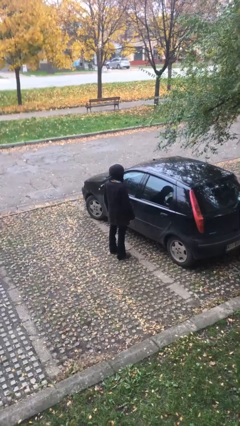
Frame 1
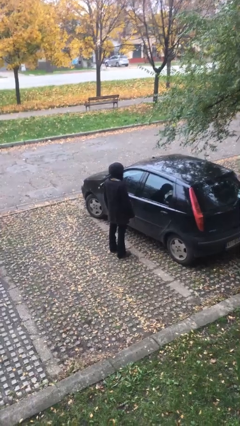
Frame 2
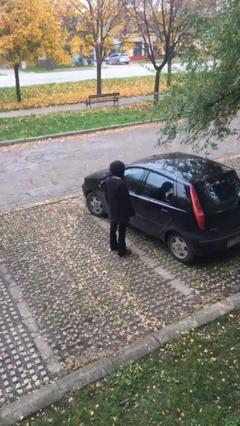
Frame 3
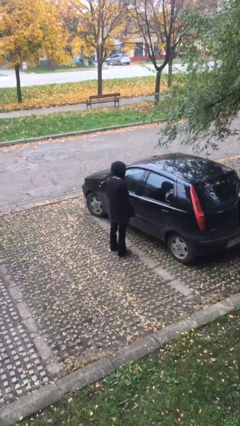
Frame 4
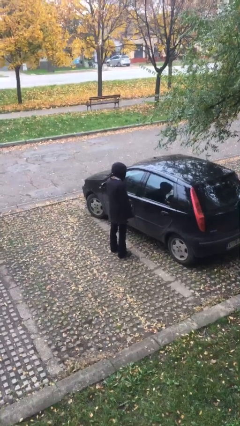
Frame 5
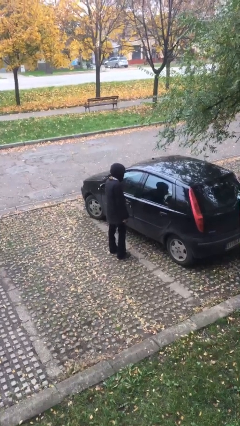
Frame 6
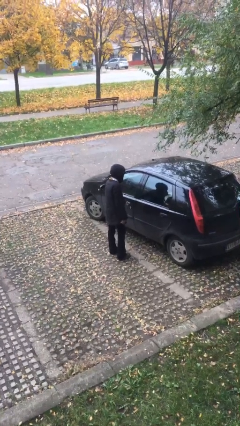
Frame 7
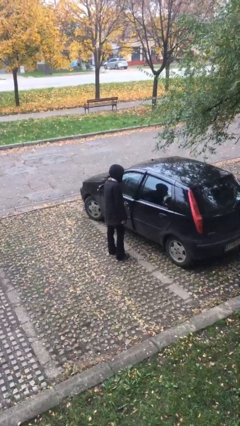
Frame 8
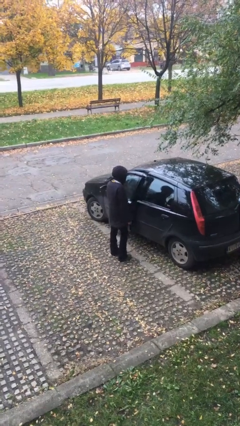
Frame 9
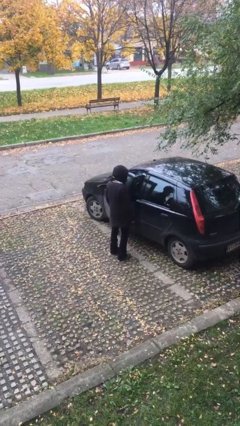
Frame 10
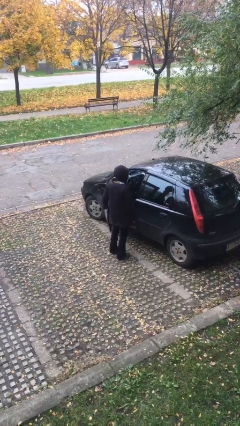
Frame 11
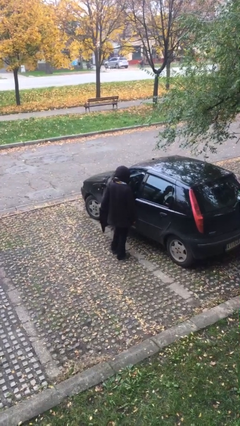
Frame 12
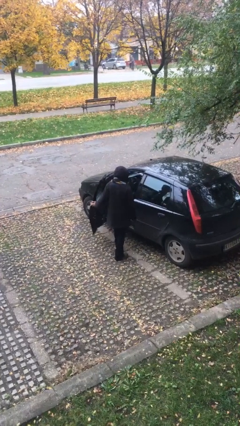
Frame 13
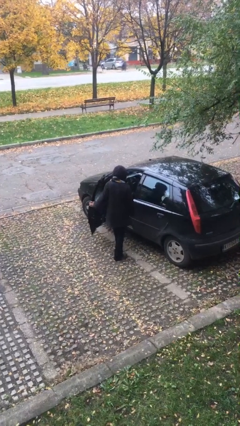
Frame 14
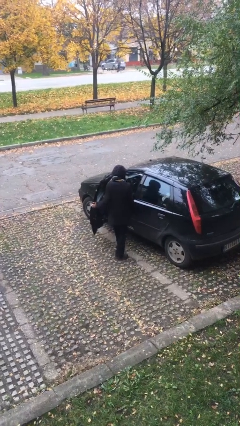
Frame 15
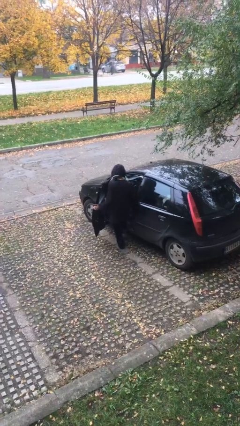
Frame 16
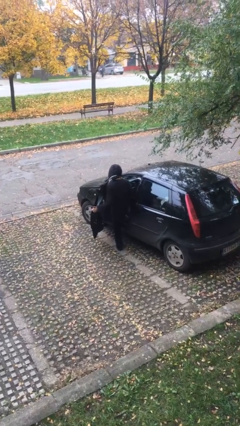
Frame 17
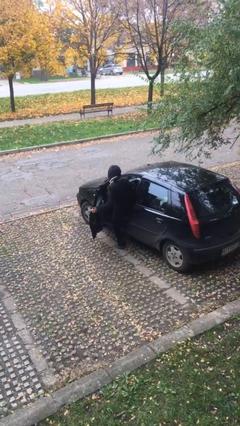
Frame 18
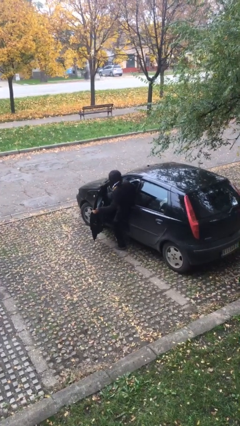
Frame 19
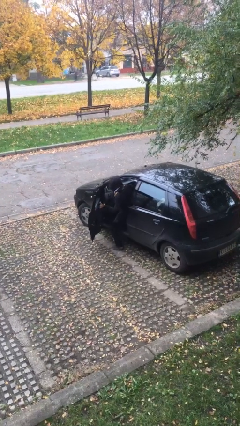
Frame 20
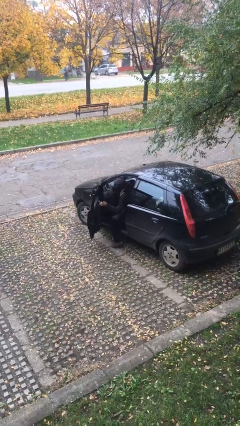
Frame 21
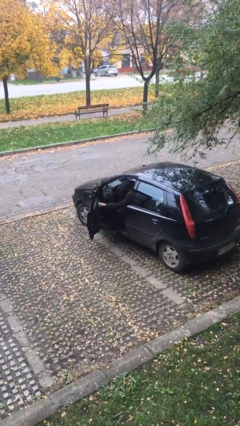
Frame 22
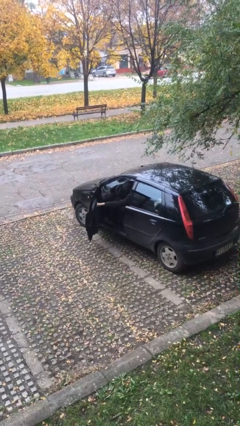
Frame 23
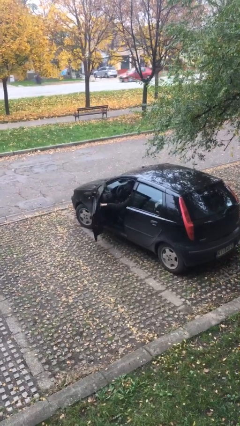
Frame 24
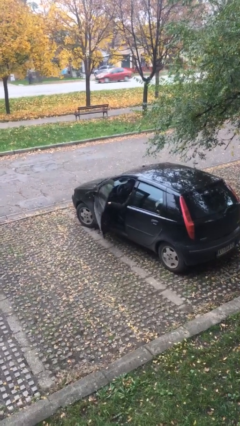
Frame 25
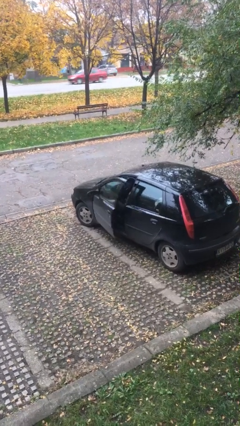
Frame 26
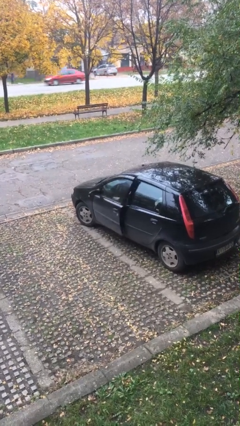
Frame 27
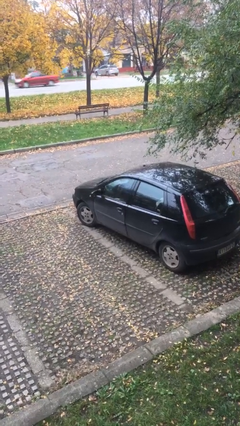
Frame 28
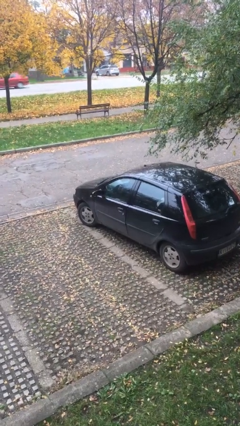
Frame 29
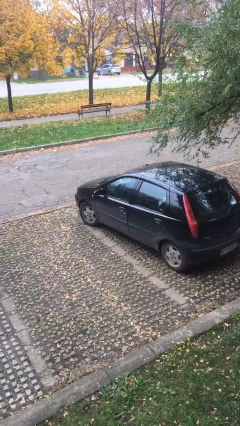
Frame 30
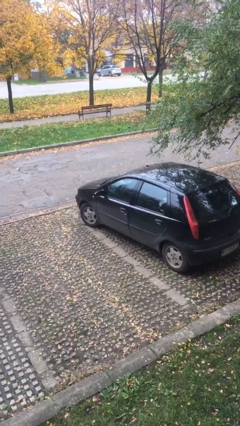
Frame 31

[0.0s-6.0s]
person enters car

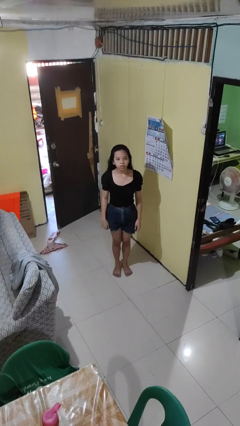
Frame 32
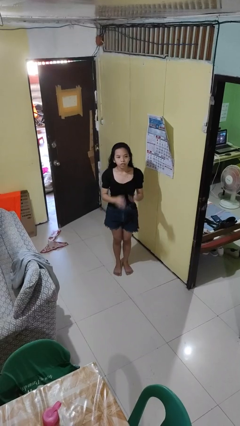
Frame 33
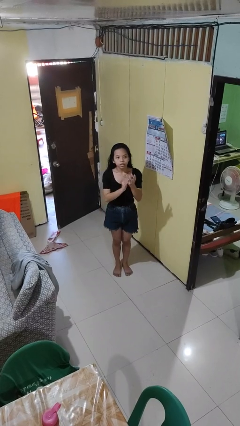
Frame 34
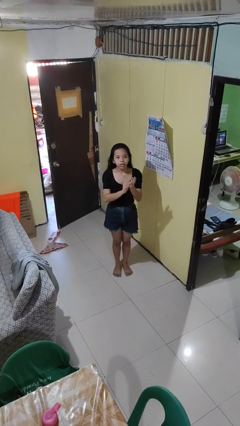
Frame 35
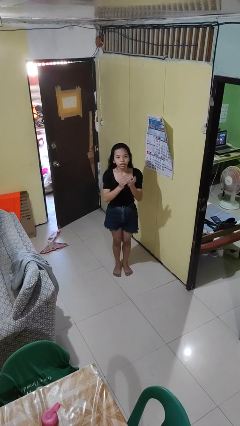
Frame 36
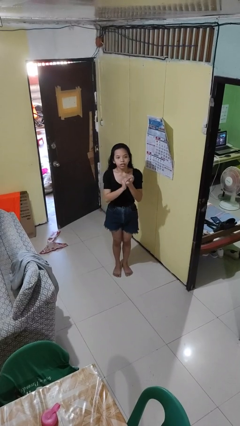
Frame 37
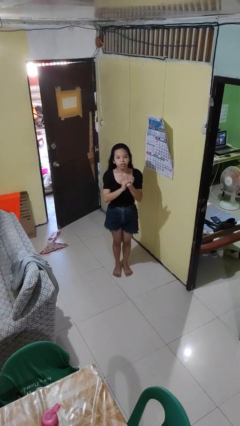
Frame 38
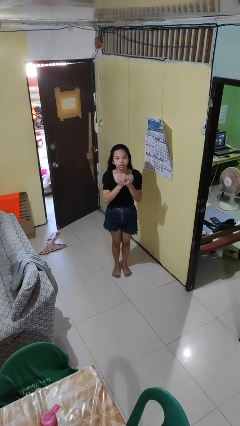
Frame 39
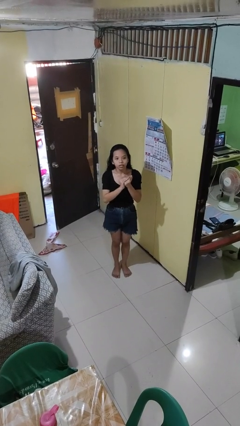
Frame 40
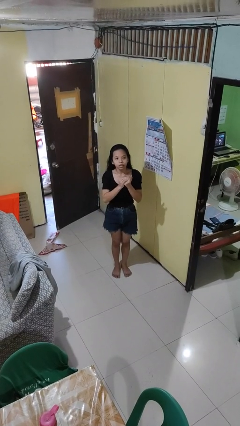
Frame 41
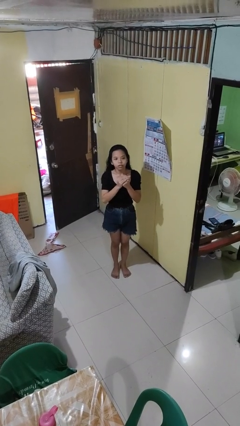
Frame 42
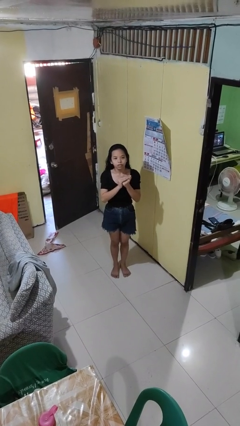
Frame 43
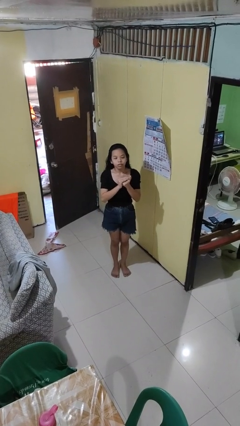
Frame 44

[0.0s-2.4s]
person cracks knuckles

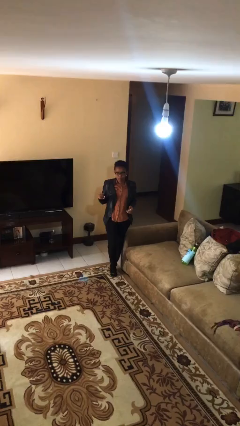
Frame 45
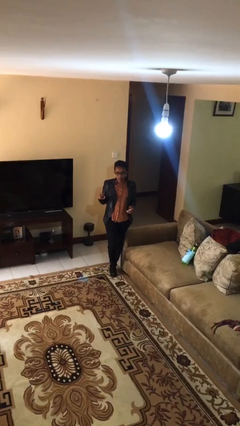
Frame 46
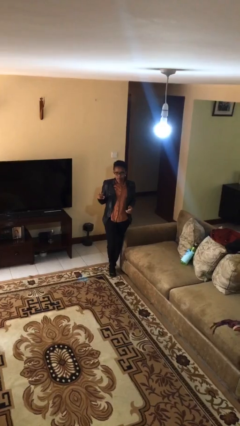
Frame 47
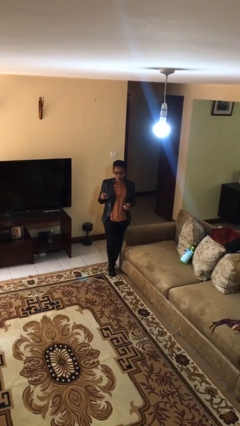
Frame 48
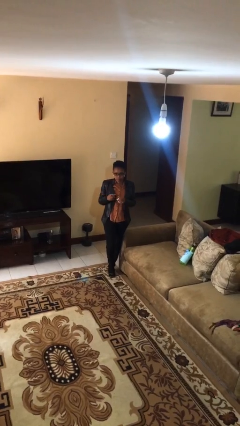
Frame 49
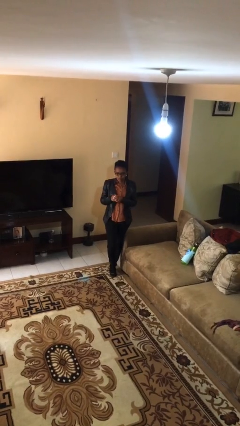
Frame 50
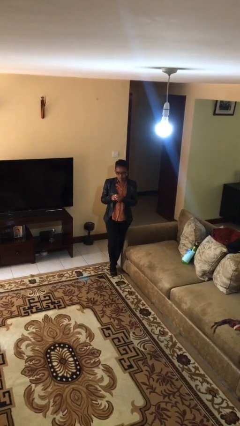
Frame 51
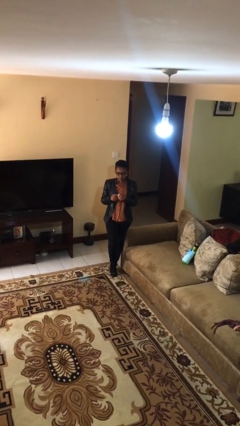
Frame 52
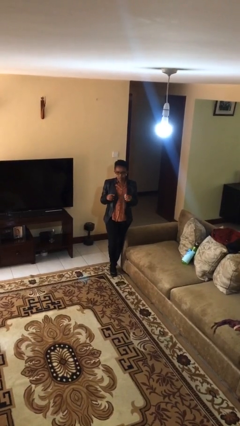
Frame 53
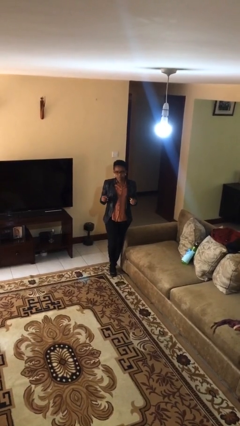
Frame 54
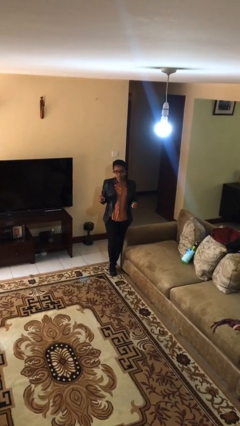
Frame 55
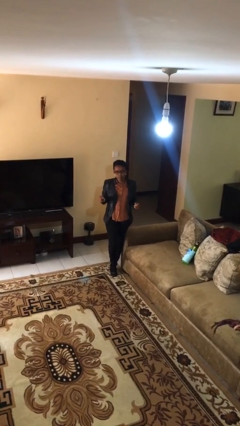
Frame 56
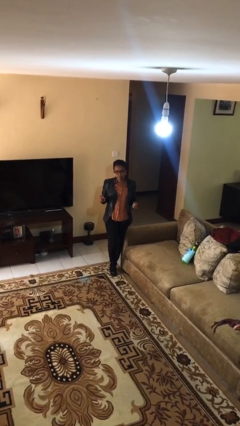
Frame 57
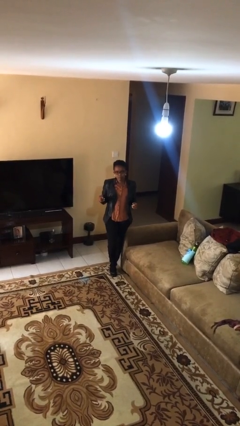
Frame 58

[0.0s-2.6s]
person takes off ring

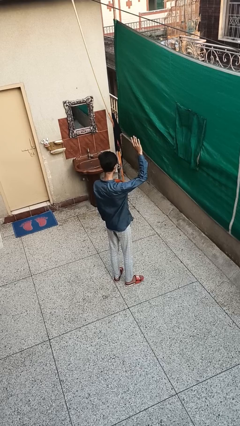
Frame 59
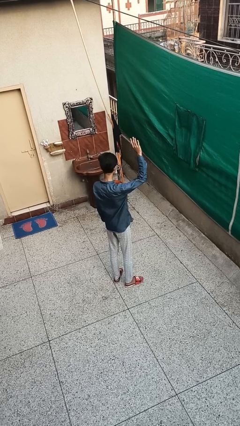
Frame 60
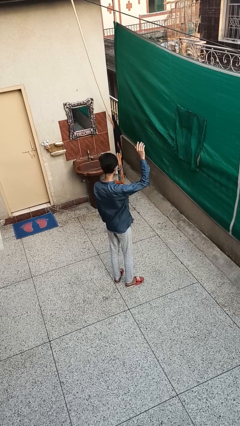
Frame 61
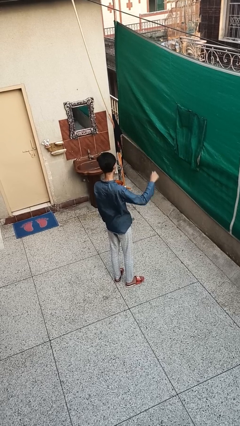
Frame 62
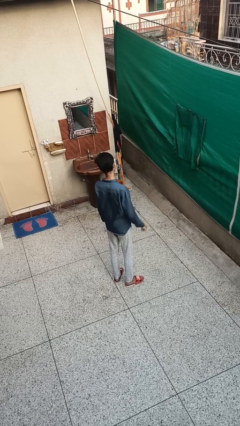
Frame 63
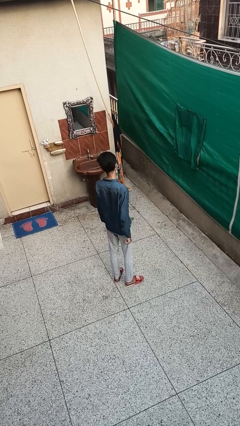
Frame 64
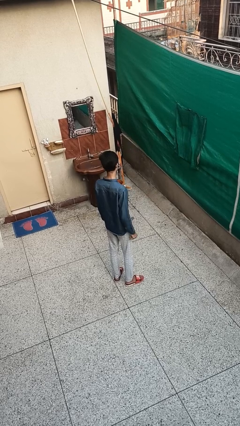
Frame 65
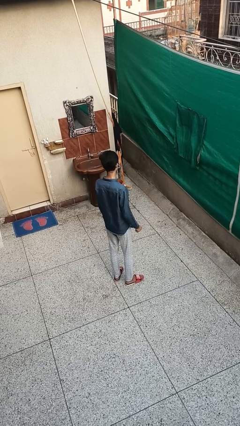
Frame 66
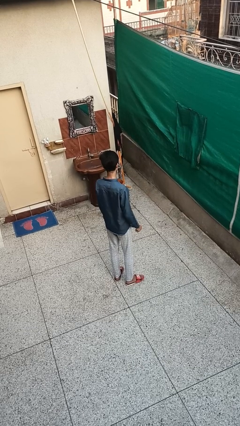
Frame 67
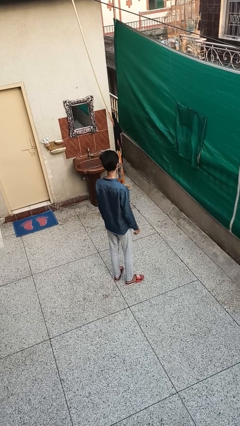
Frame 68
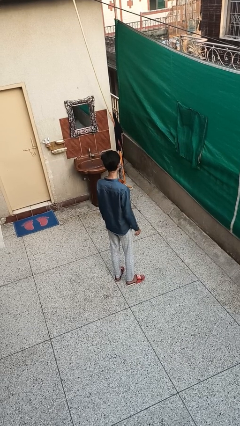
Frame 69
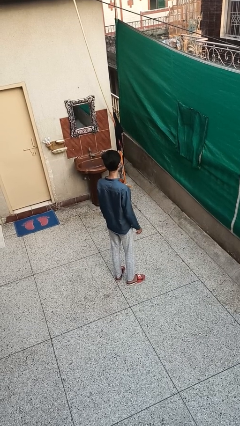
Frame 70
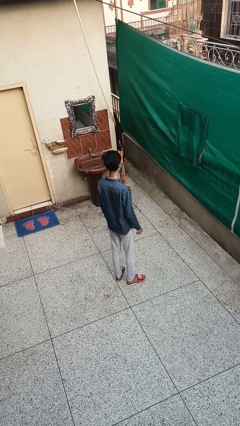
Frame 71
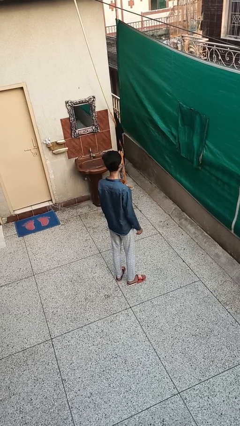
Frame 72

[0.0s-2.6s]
person gestures lower hand

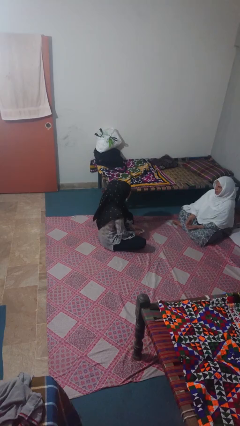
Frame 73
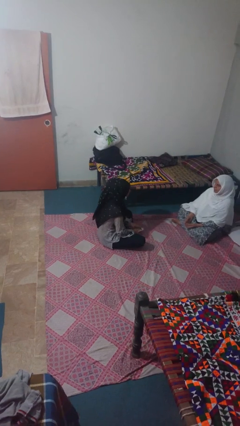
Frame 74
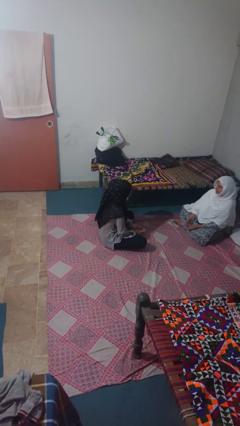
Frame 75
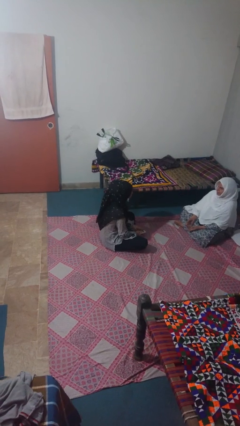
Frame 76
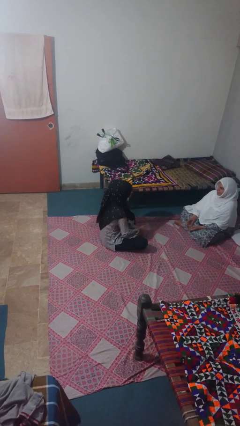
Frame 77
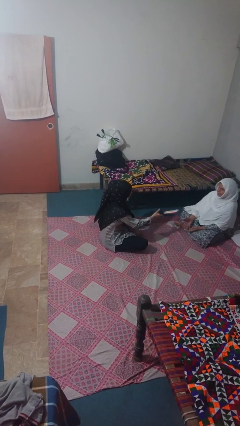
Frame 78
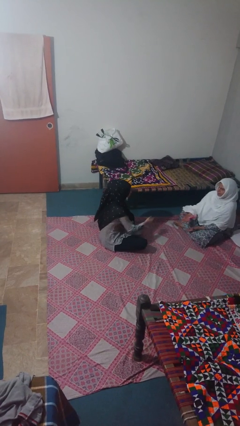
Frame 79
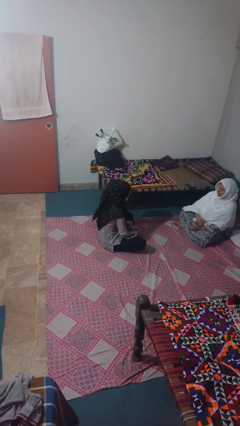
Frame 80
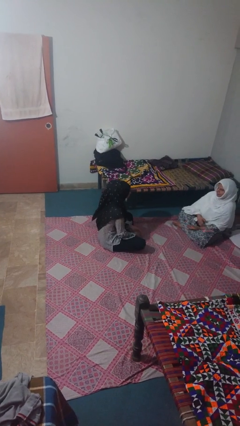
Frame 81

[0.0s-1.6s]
person throws object to person

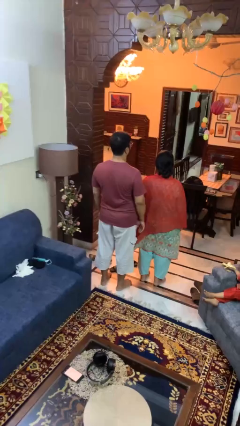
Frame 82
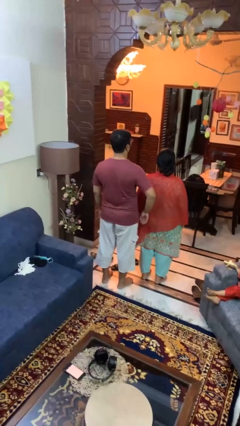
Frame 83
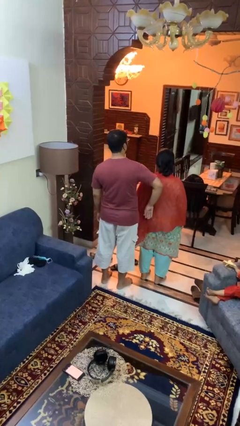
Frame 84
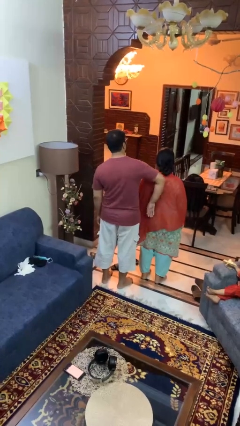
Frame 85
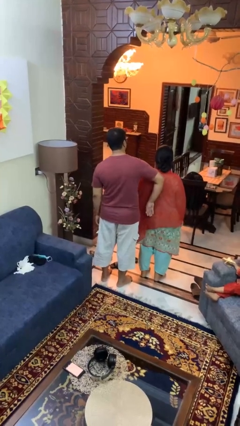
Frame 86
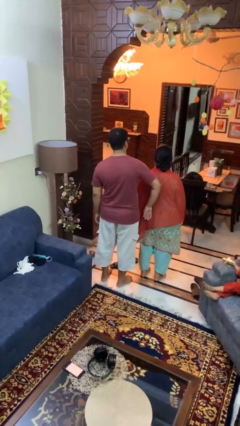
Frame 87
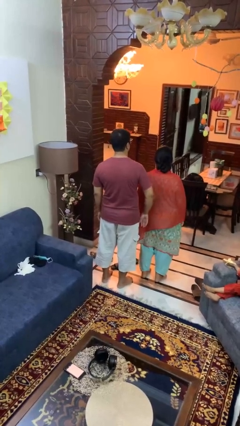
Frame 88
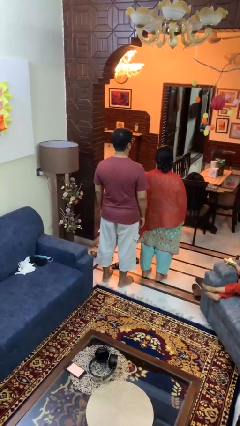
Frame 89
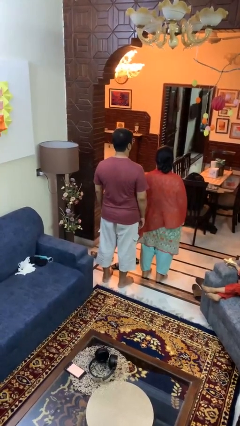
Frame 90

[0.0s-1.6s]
person shoves person

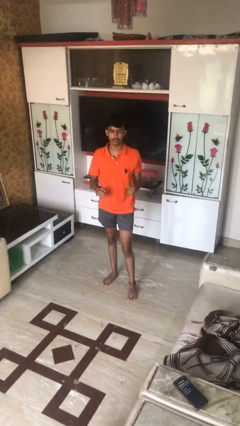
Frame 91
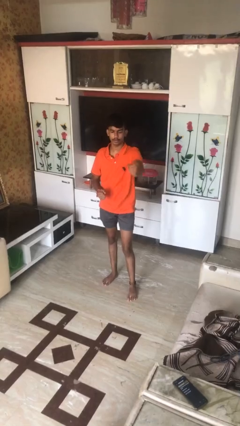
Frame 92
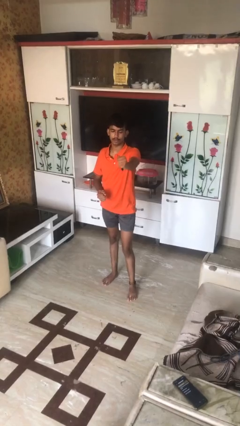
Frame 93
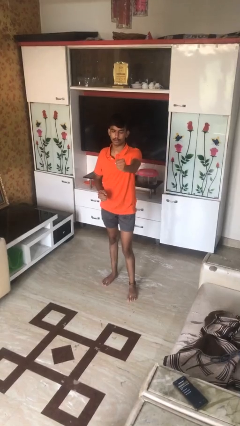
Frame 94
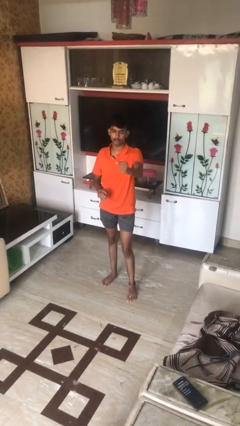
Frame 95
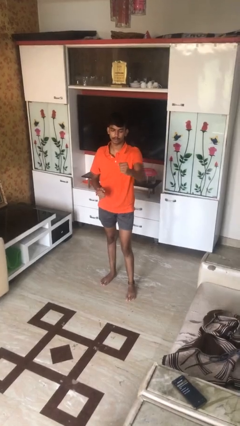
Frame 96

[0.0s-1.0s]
person punches
